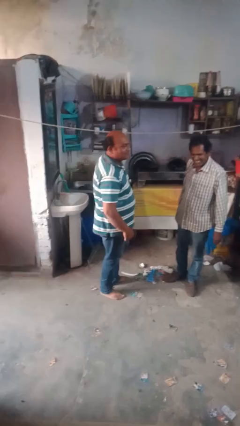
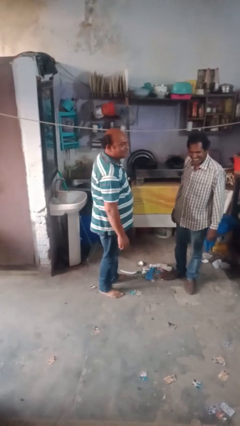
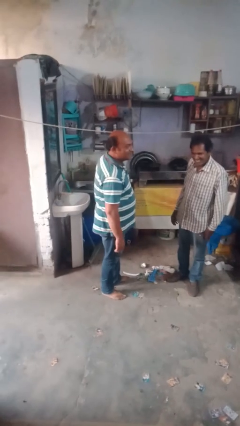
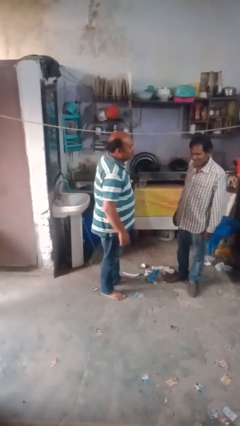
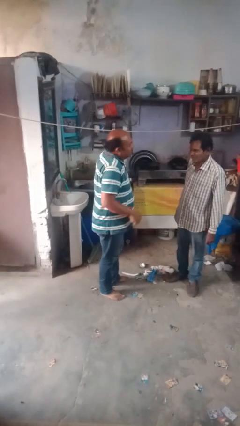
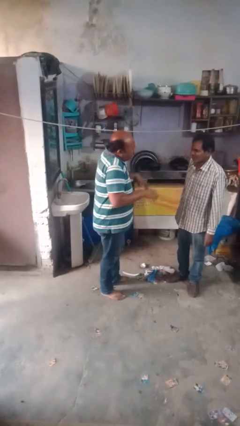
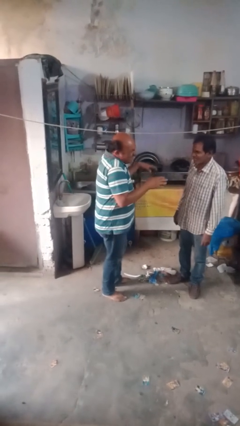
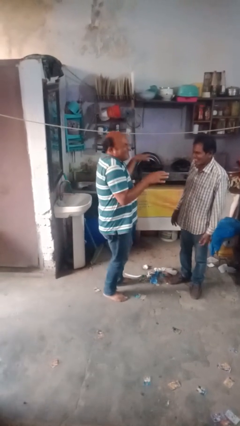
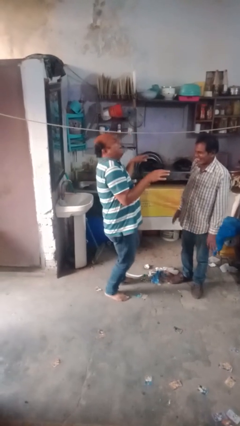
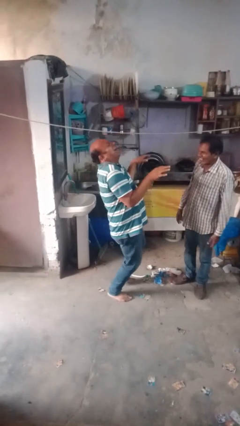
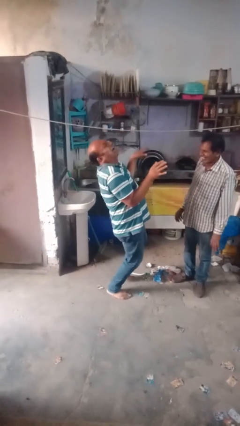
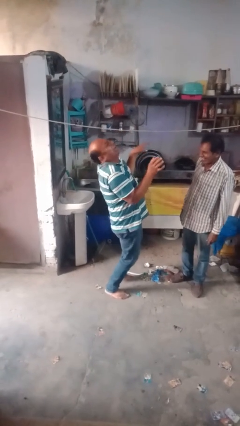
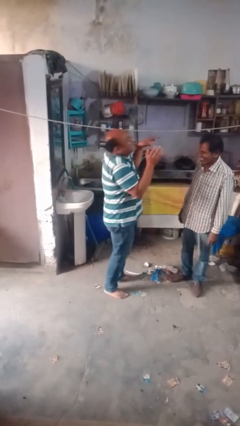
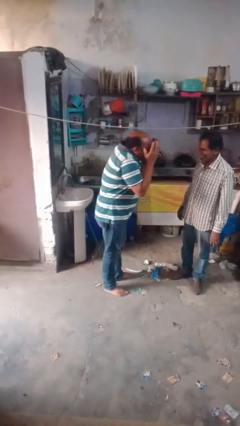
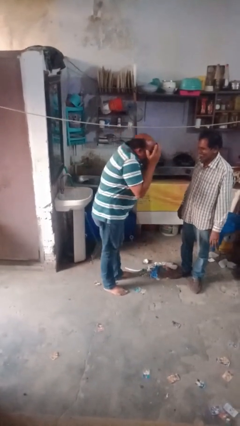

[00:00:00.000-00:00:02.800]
person laughs with person

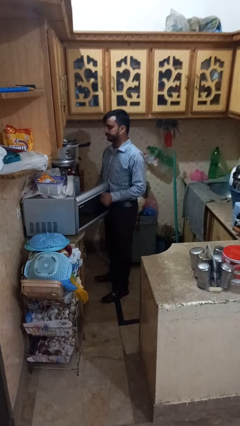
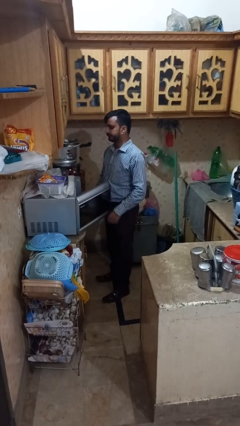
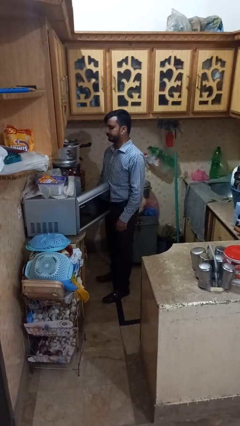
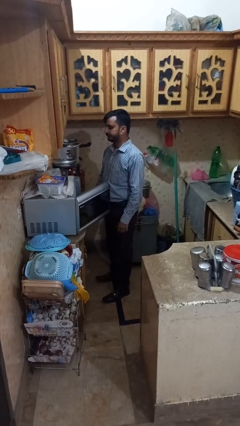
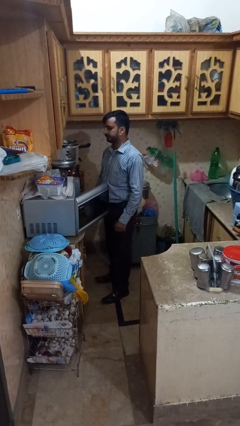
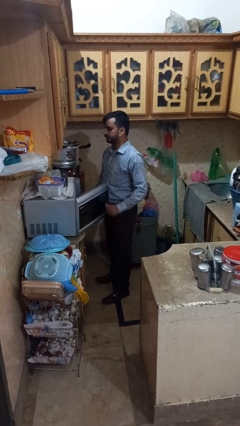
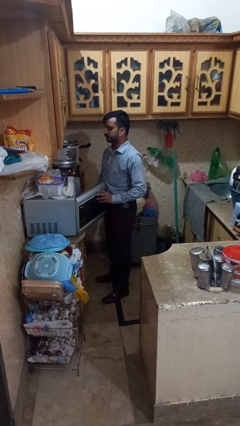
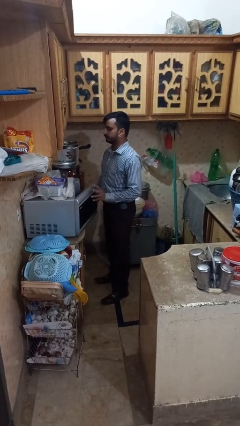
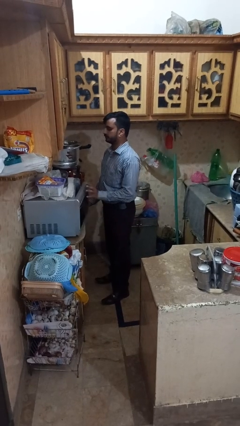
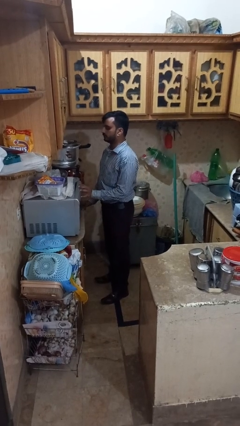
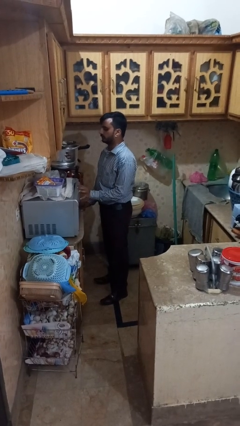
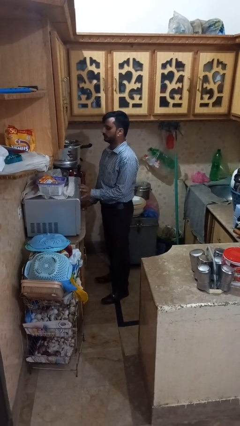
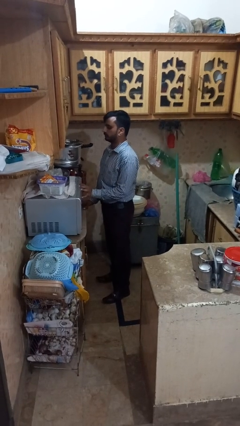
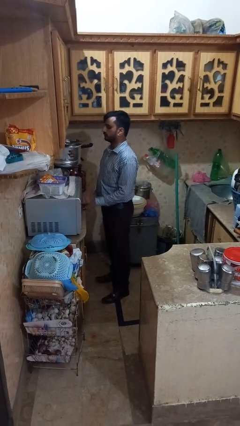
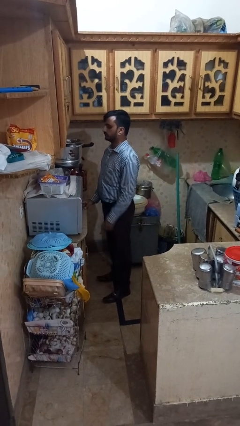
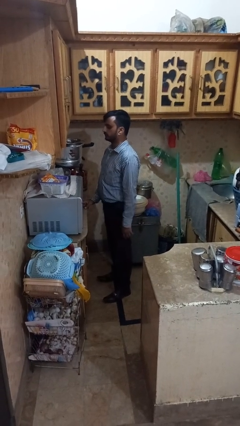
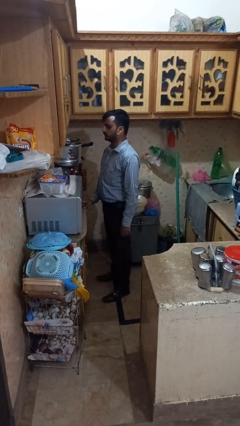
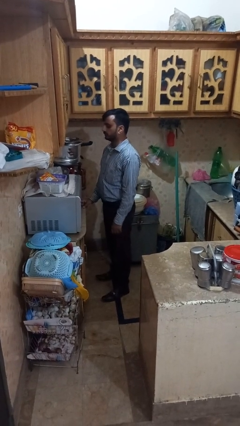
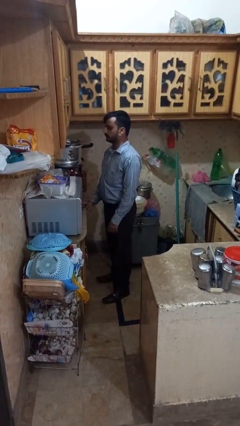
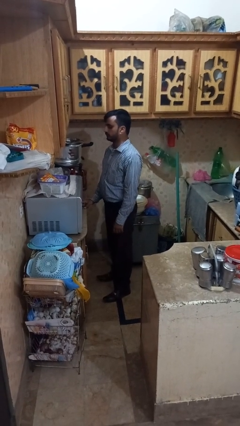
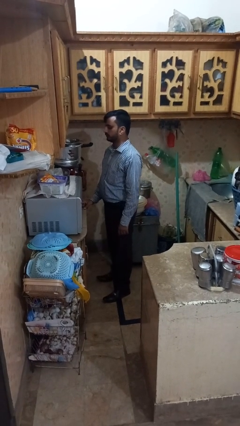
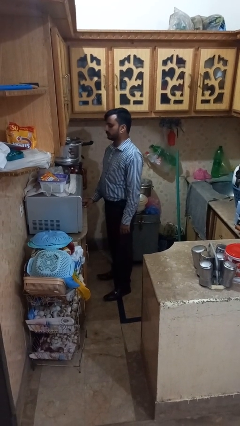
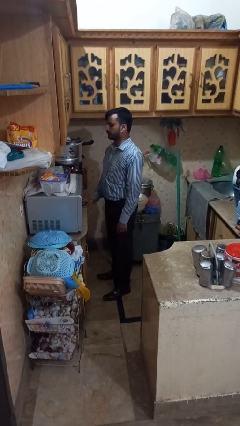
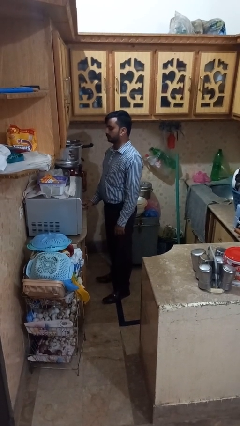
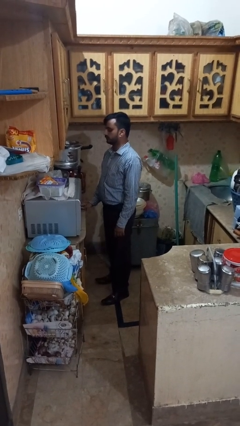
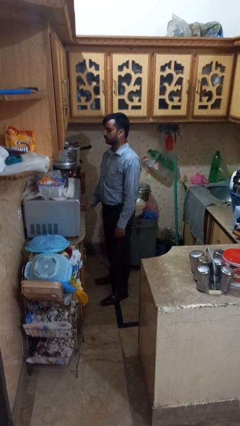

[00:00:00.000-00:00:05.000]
person closes microwave

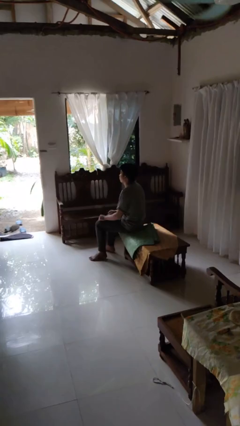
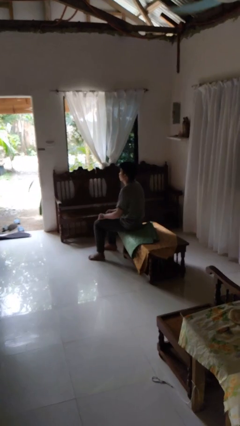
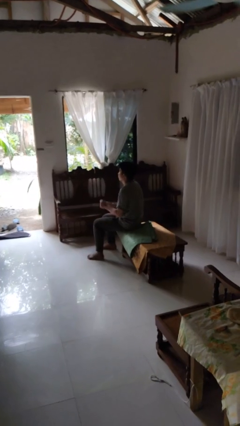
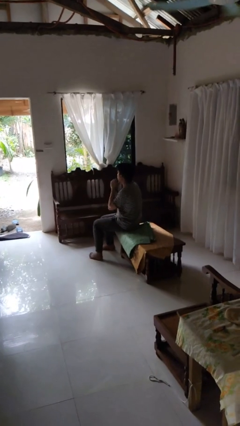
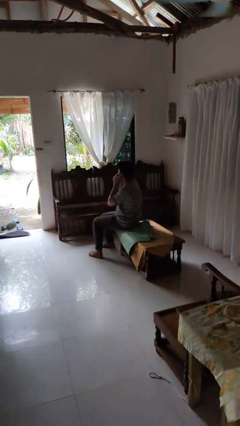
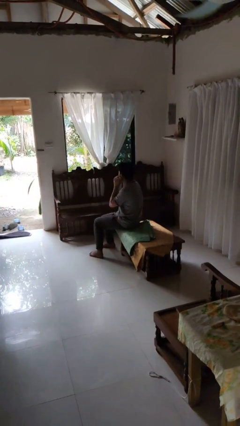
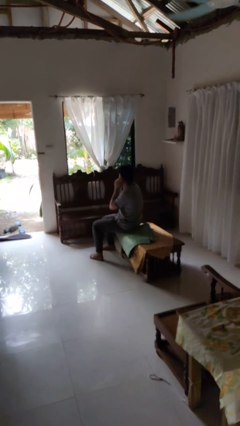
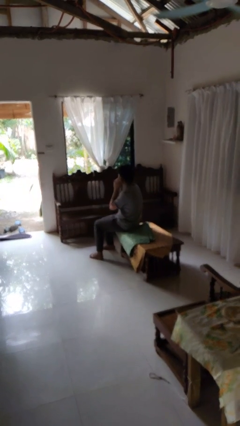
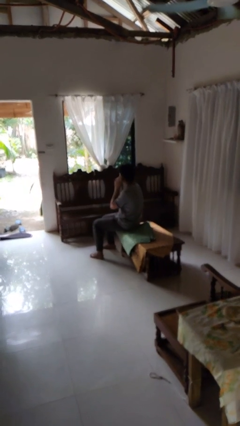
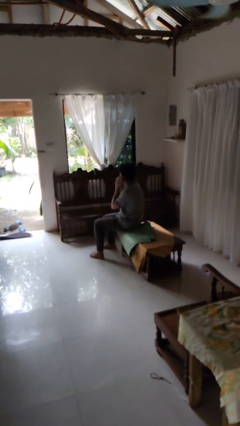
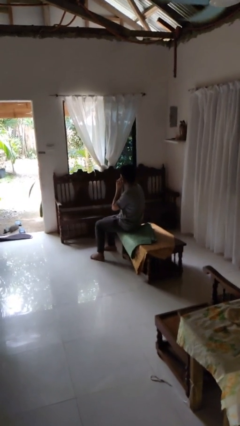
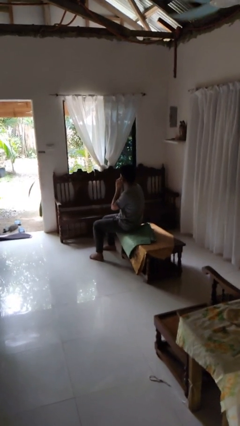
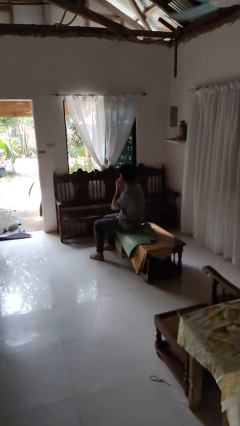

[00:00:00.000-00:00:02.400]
person puts on earrings

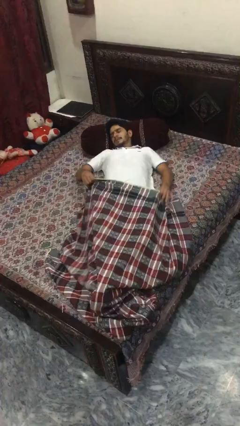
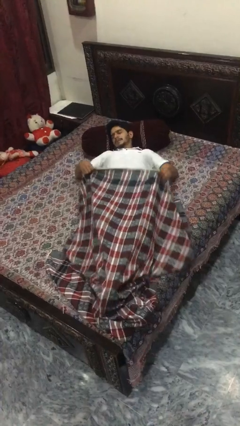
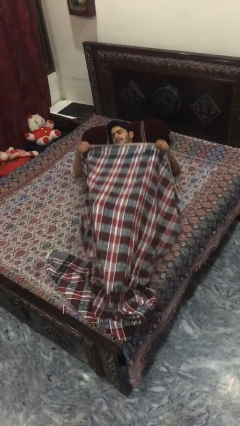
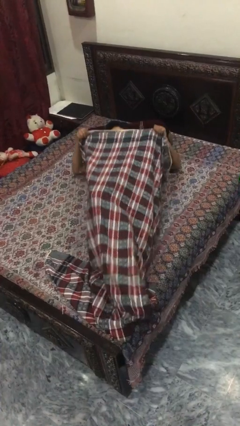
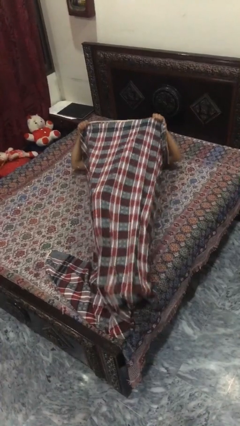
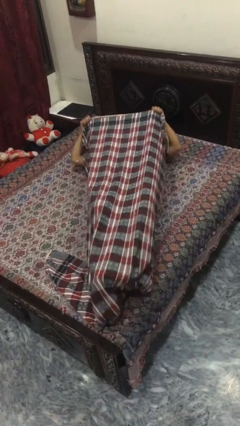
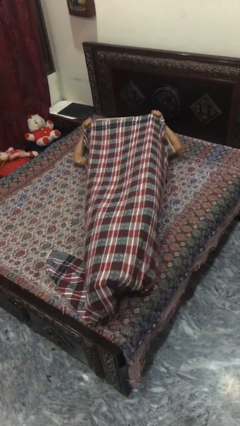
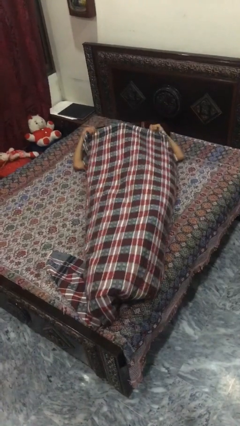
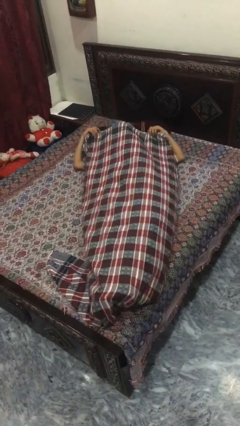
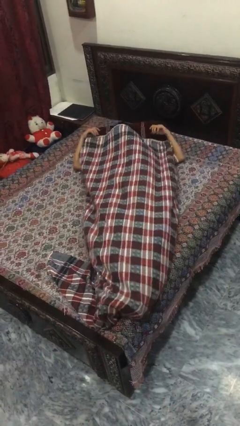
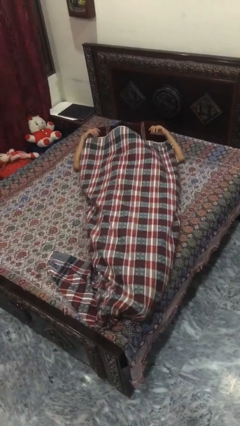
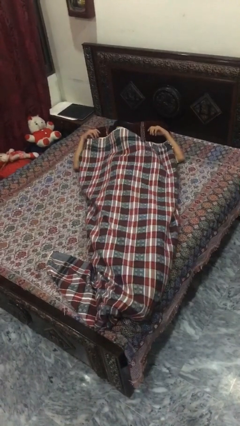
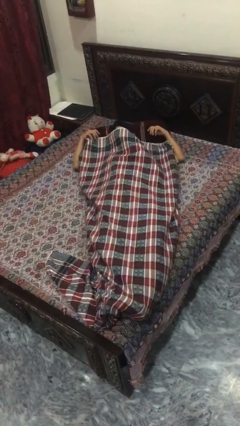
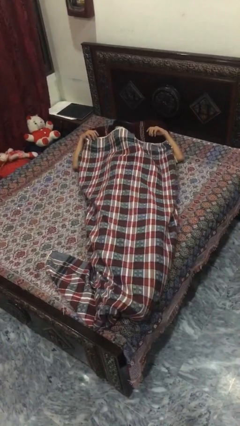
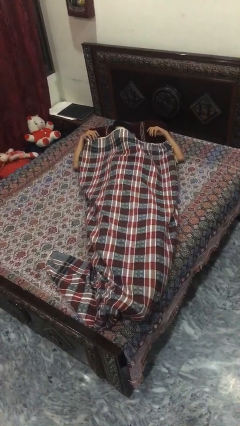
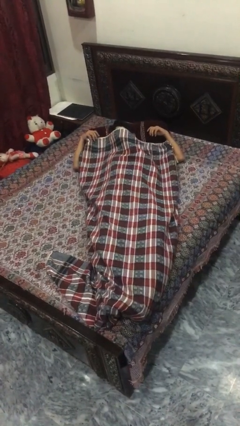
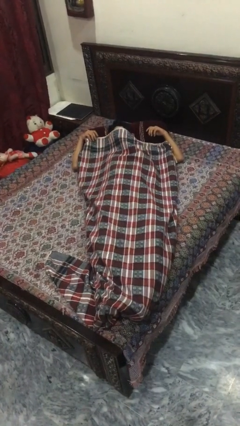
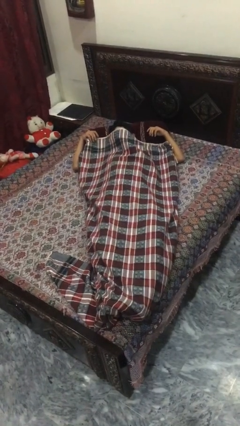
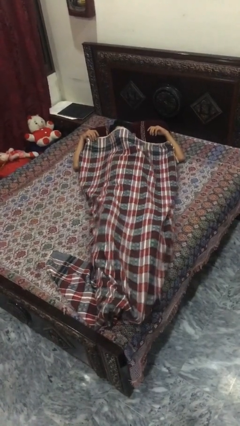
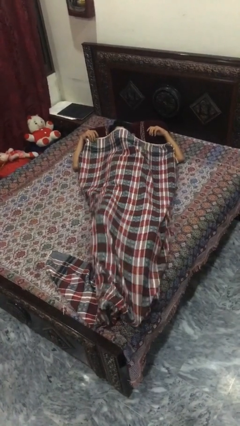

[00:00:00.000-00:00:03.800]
person covers with bedsheets

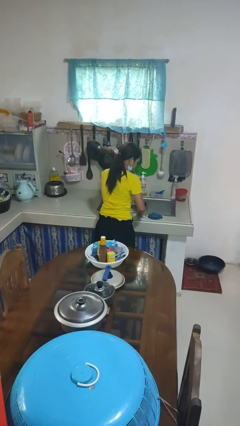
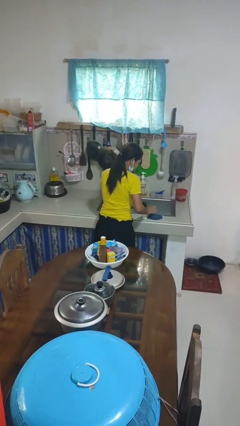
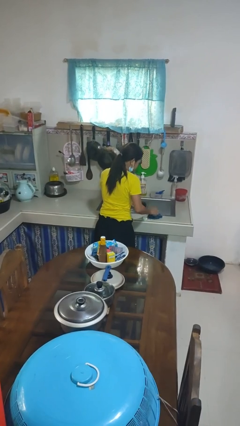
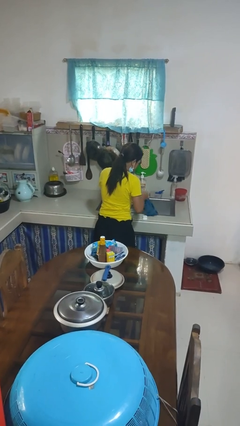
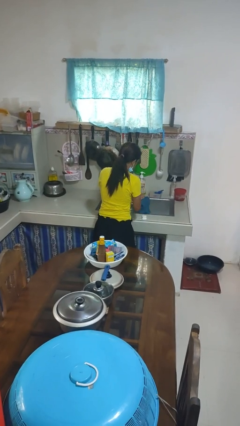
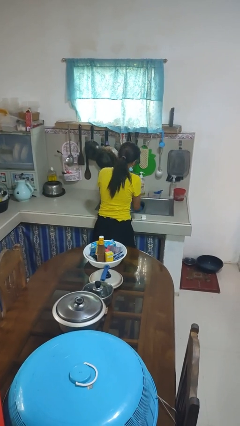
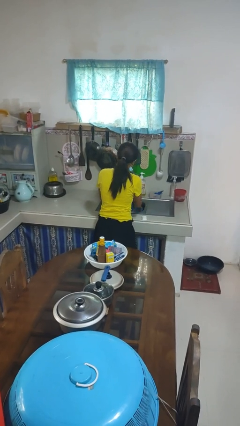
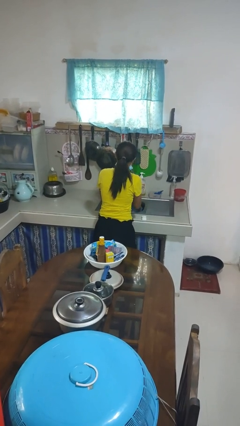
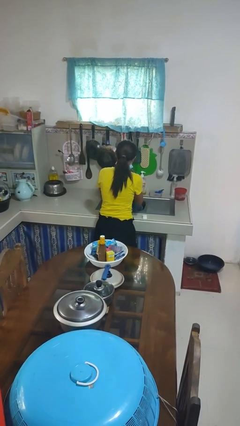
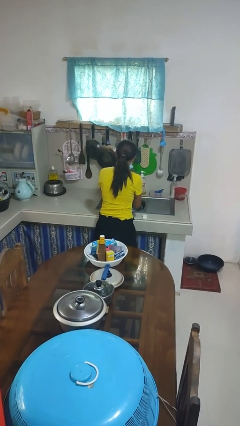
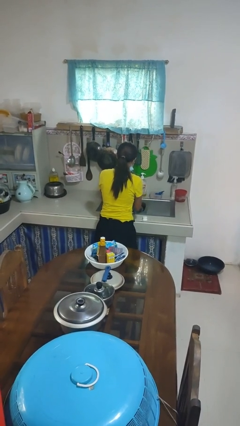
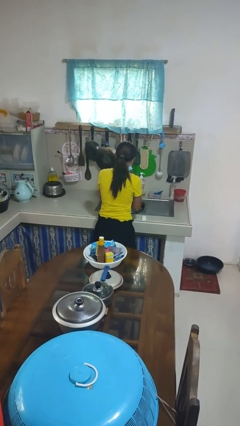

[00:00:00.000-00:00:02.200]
person dries hands with towel

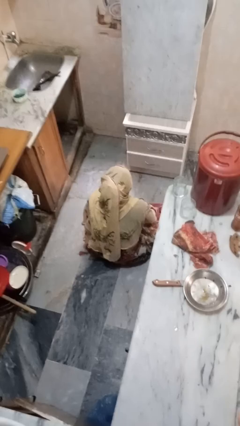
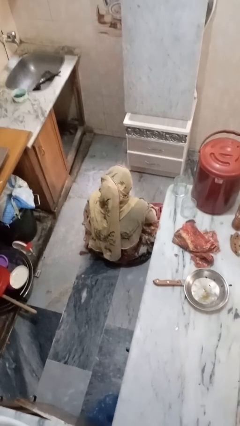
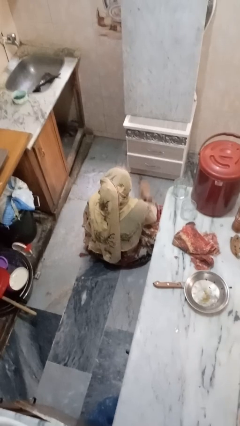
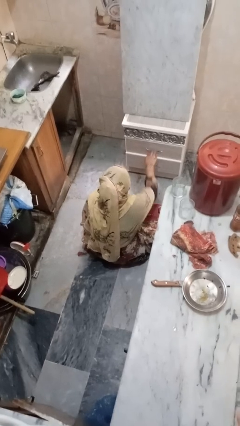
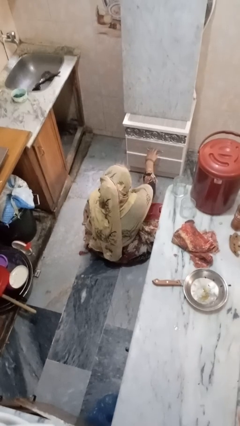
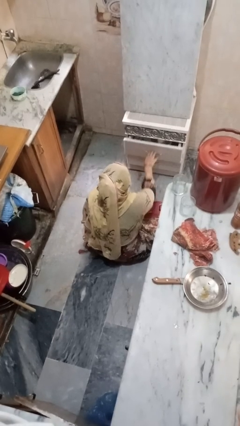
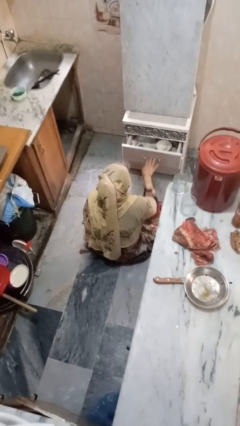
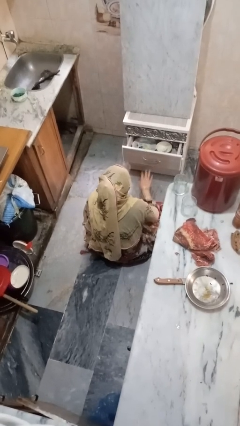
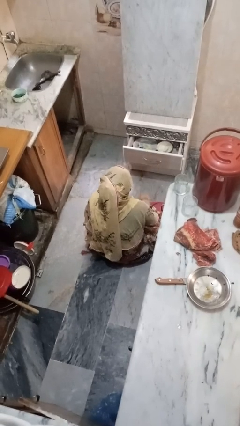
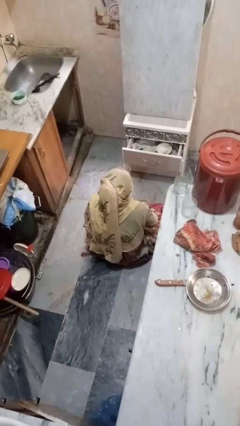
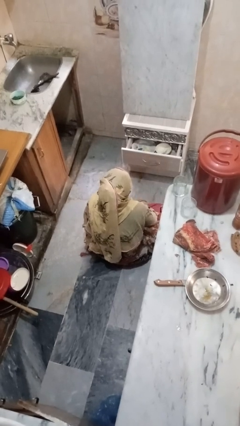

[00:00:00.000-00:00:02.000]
person opens kitchen drawer
